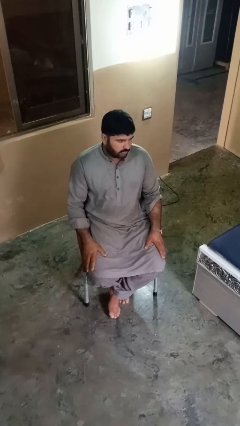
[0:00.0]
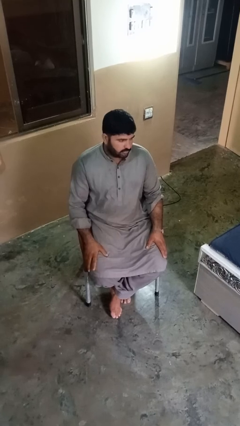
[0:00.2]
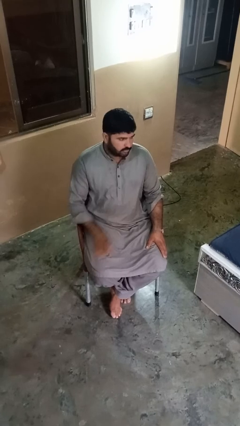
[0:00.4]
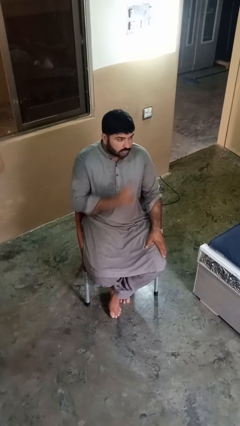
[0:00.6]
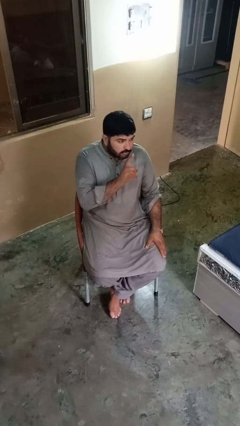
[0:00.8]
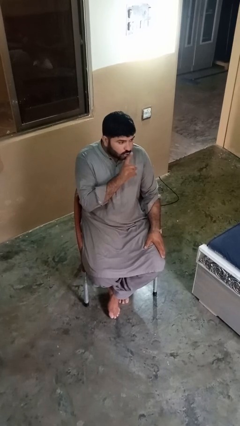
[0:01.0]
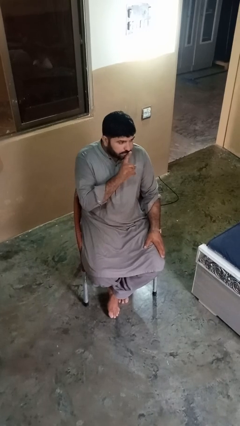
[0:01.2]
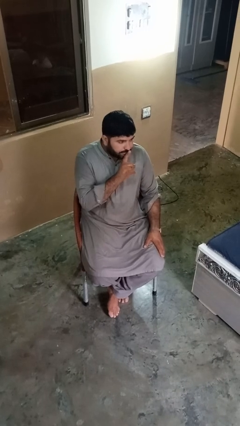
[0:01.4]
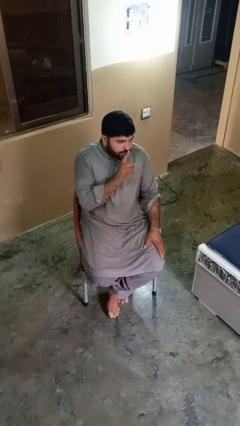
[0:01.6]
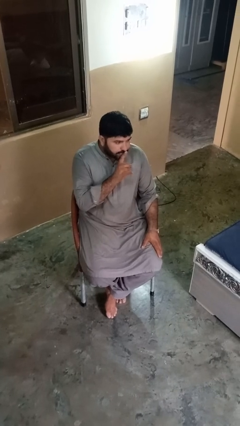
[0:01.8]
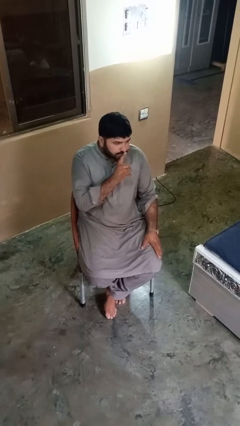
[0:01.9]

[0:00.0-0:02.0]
person gestures be quiet

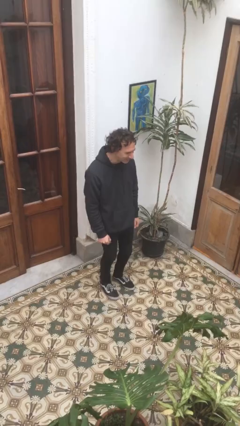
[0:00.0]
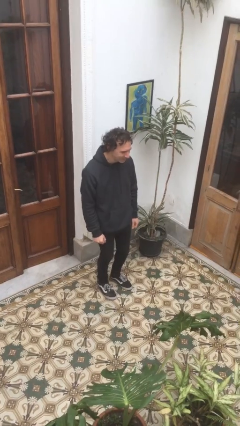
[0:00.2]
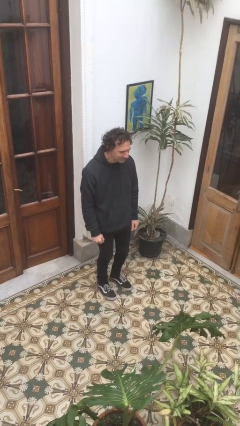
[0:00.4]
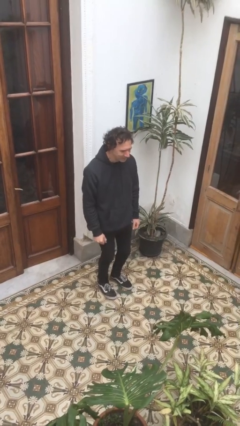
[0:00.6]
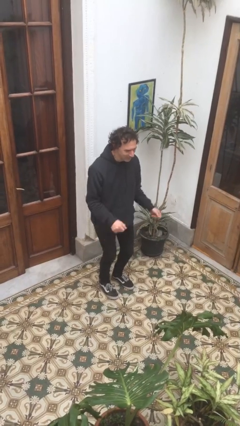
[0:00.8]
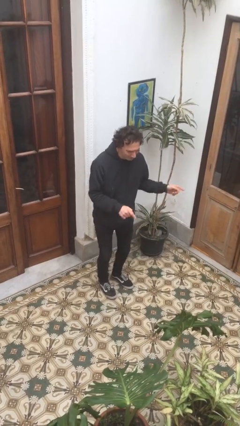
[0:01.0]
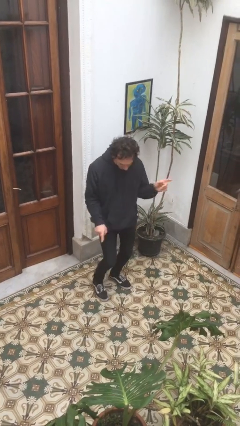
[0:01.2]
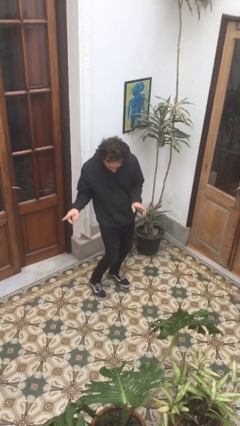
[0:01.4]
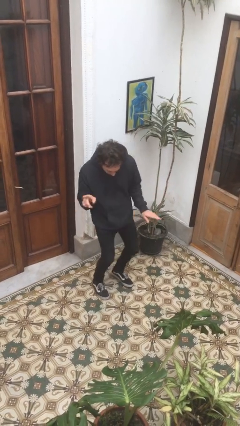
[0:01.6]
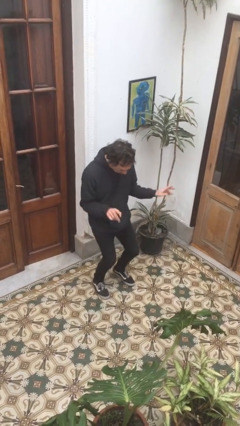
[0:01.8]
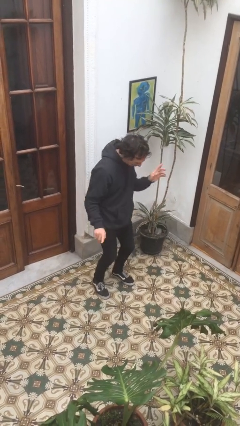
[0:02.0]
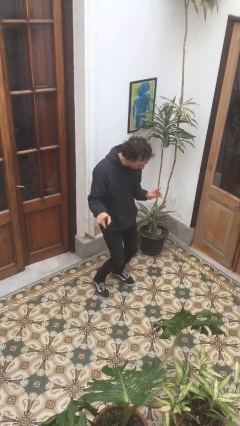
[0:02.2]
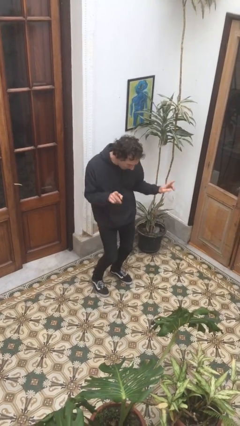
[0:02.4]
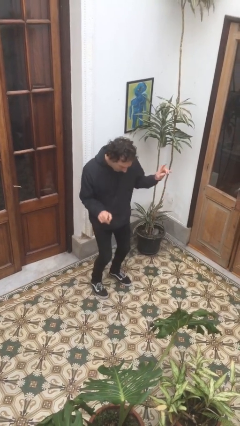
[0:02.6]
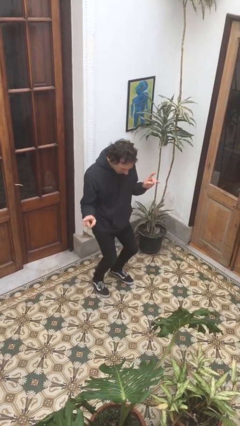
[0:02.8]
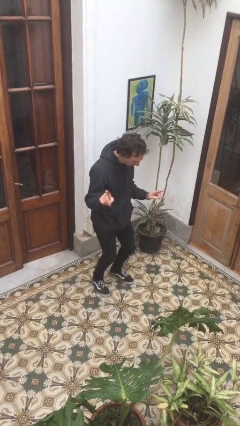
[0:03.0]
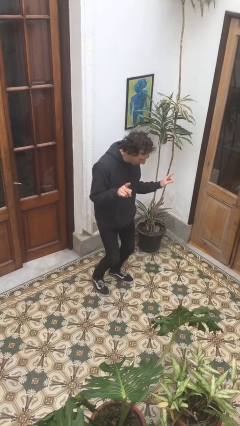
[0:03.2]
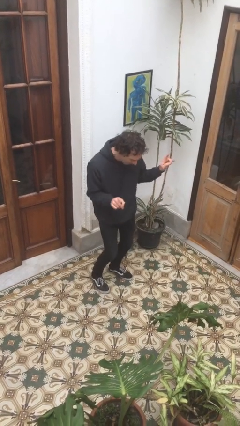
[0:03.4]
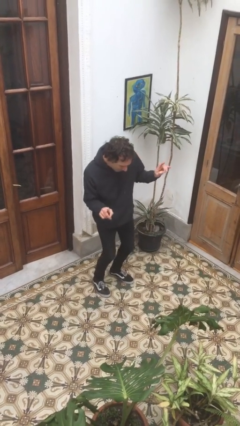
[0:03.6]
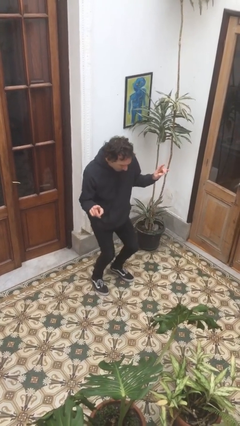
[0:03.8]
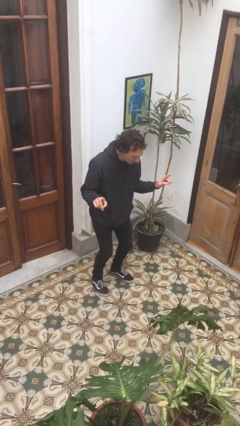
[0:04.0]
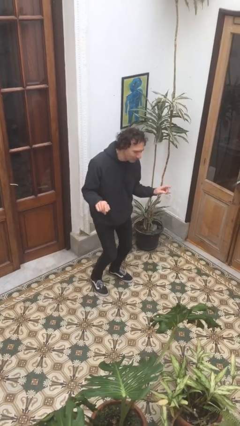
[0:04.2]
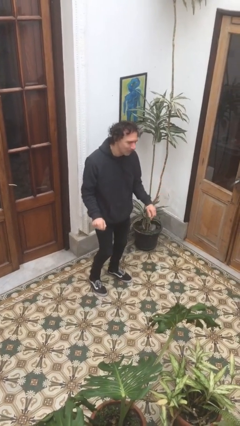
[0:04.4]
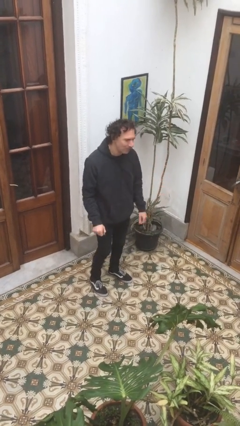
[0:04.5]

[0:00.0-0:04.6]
person dances in place

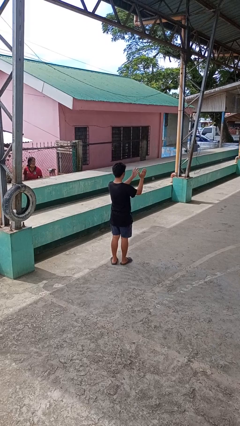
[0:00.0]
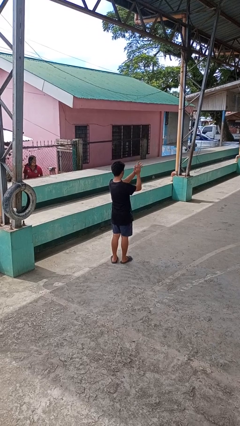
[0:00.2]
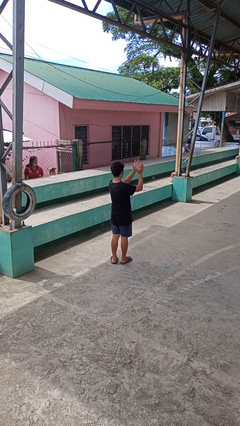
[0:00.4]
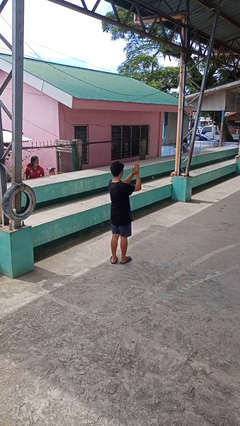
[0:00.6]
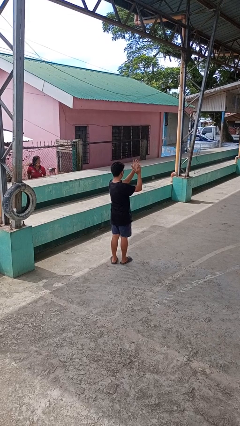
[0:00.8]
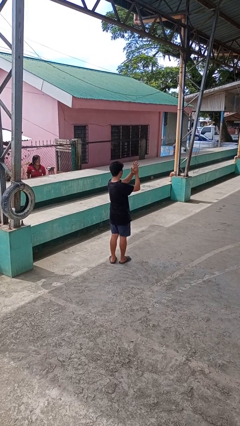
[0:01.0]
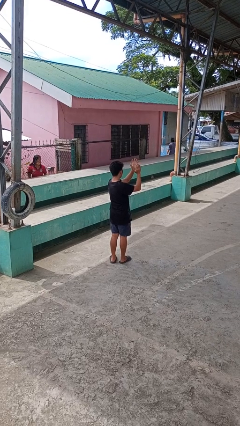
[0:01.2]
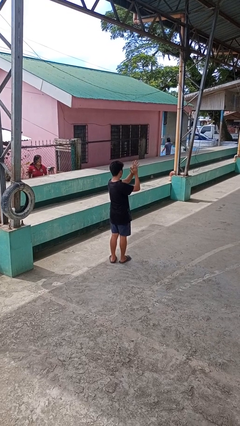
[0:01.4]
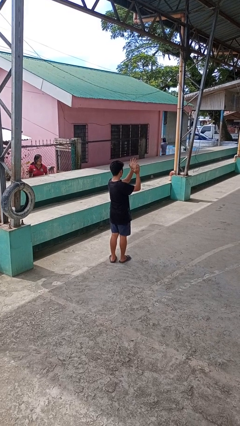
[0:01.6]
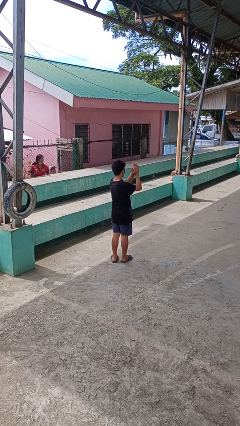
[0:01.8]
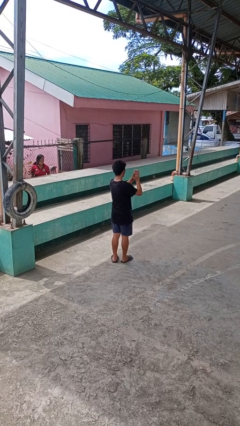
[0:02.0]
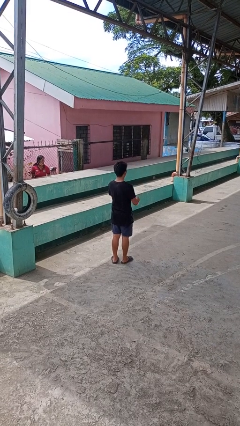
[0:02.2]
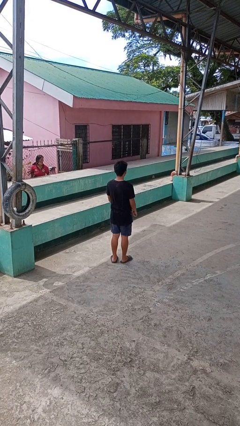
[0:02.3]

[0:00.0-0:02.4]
person claps hands

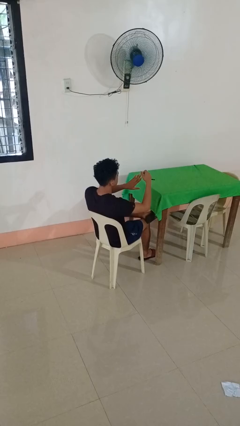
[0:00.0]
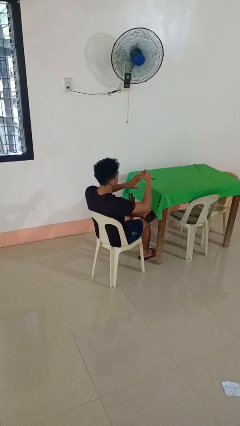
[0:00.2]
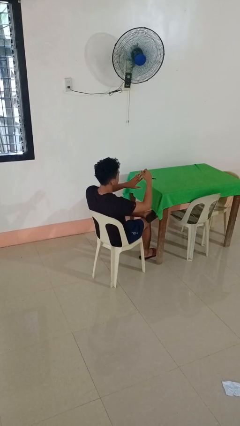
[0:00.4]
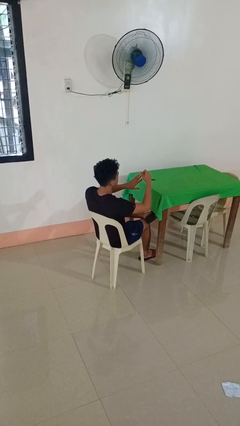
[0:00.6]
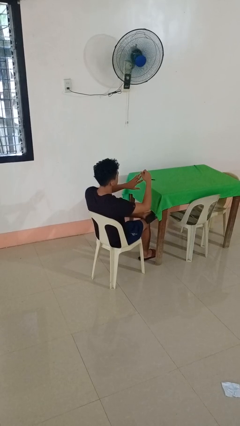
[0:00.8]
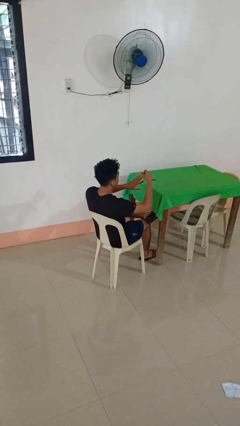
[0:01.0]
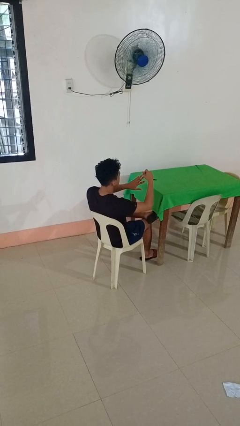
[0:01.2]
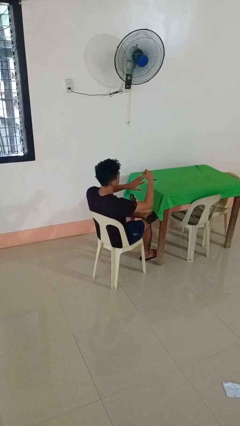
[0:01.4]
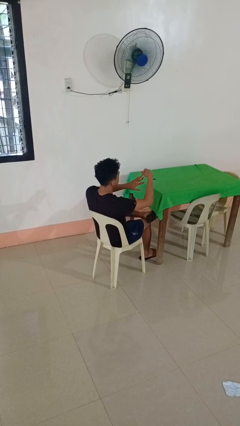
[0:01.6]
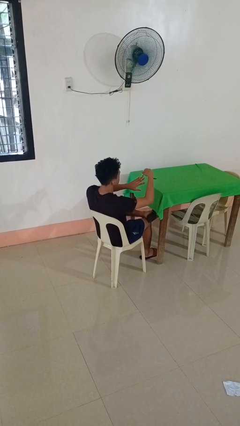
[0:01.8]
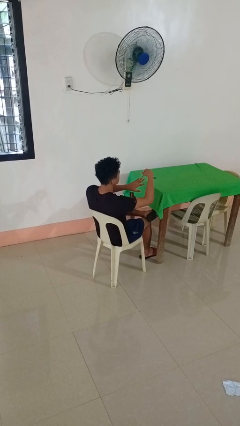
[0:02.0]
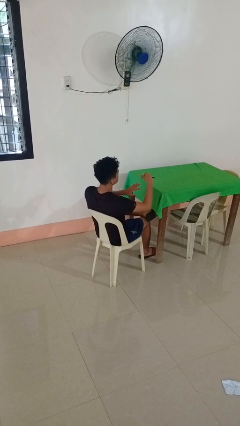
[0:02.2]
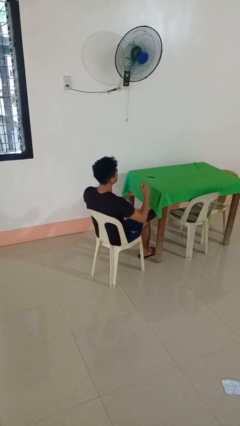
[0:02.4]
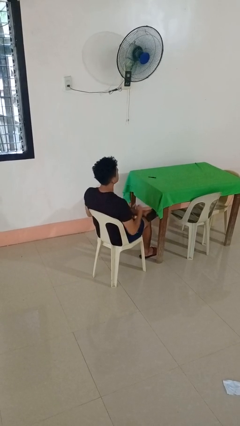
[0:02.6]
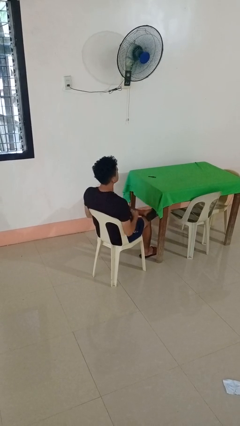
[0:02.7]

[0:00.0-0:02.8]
person clips fingernails

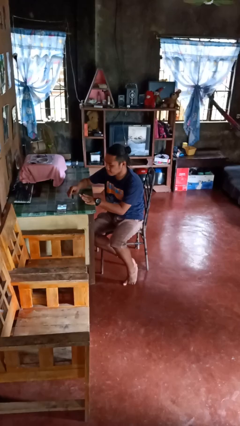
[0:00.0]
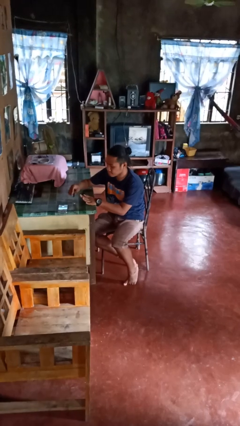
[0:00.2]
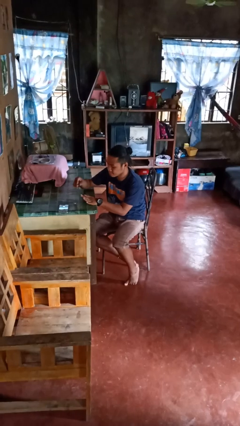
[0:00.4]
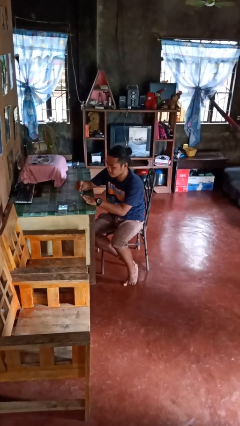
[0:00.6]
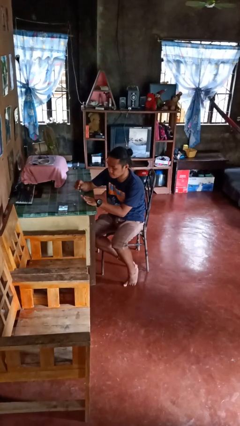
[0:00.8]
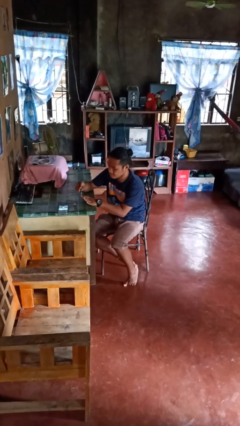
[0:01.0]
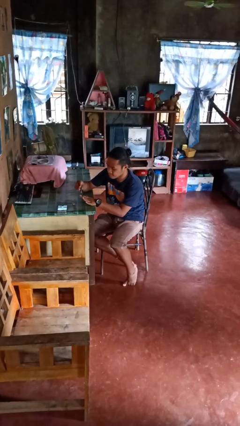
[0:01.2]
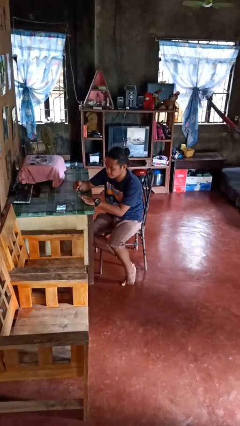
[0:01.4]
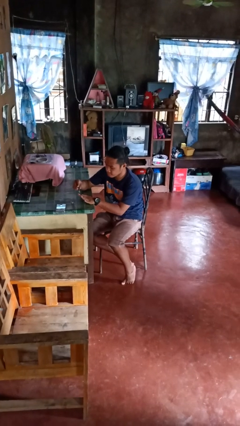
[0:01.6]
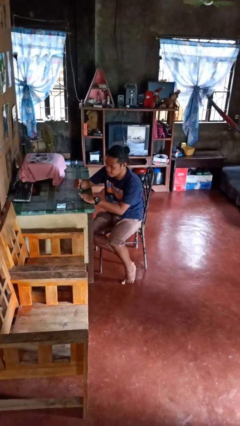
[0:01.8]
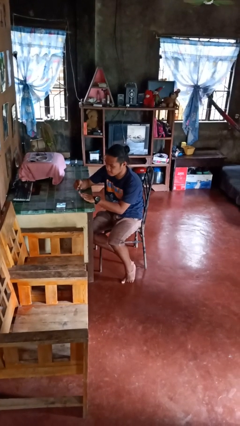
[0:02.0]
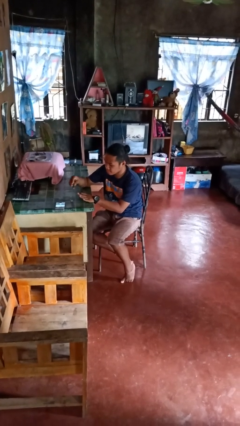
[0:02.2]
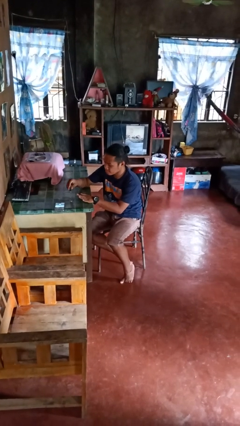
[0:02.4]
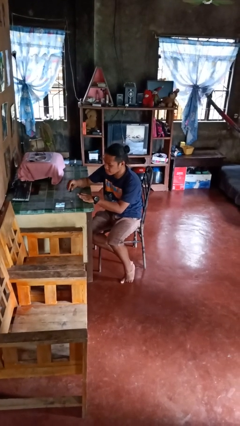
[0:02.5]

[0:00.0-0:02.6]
person paints fingernails

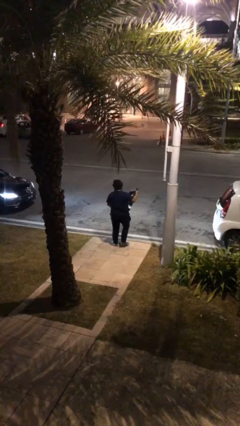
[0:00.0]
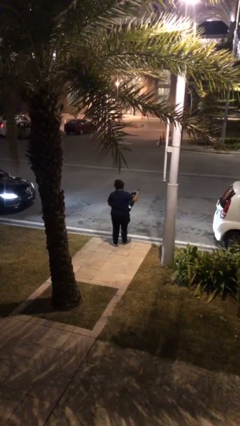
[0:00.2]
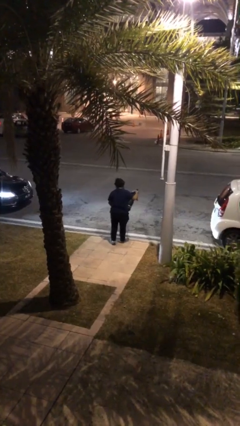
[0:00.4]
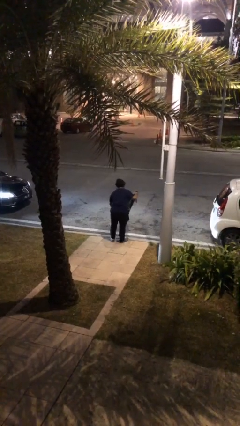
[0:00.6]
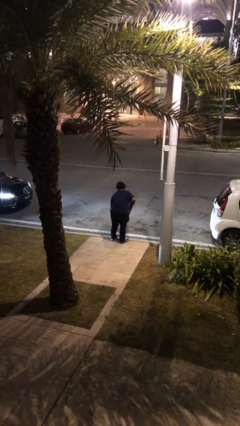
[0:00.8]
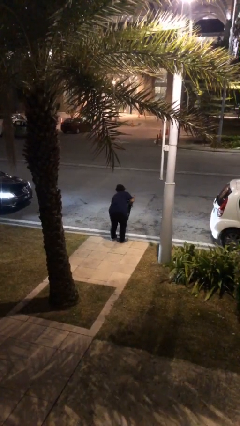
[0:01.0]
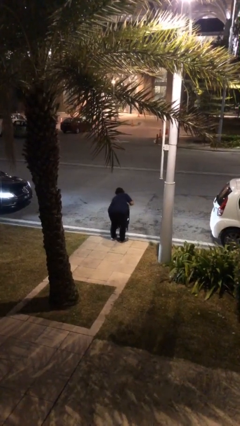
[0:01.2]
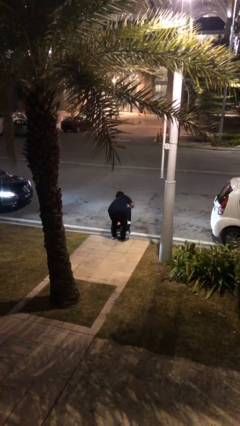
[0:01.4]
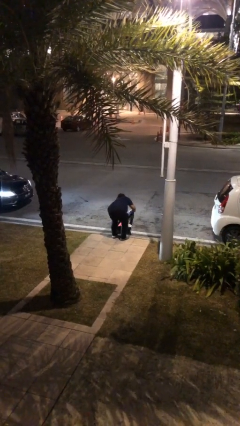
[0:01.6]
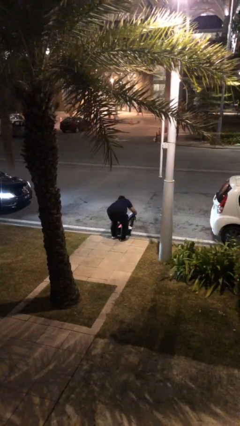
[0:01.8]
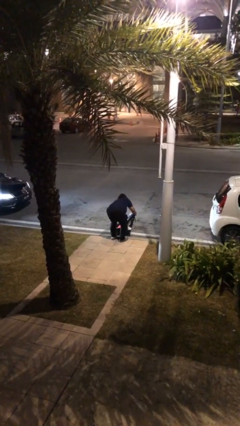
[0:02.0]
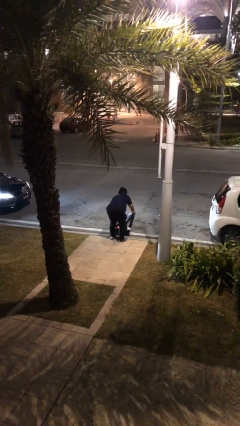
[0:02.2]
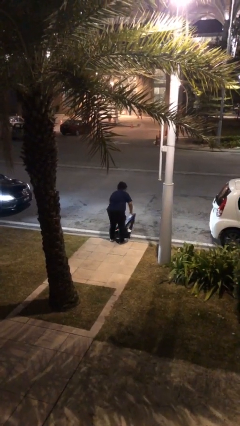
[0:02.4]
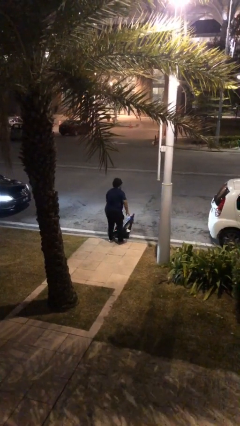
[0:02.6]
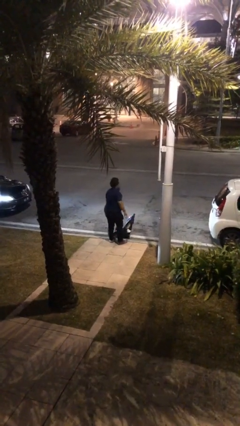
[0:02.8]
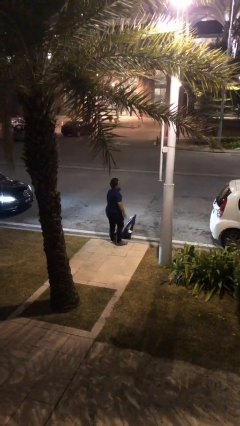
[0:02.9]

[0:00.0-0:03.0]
person puts down object on floor

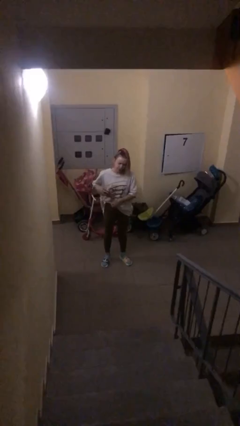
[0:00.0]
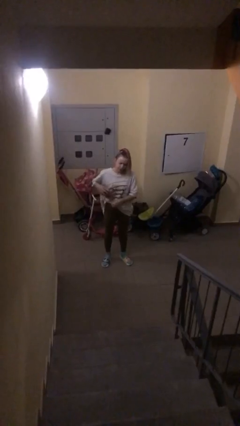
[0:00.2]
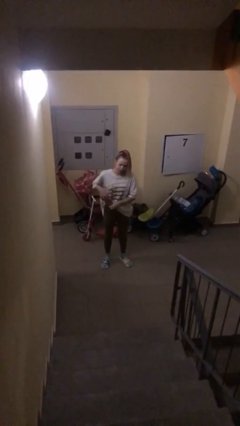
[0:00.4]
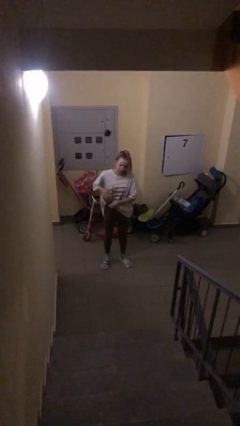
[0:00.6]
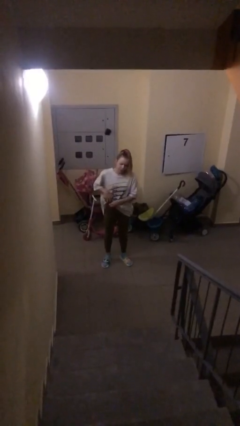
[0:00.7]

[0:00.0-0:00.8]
person puts phone into pocket
